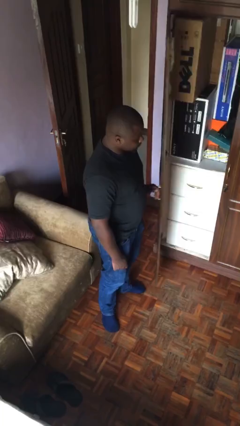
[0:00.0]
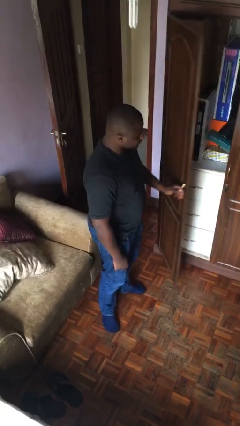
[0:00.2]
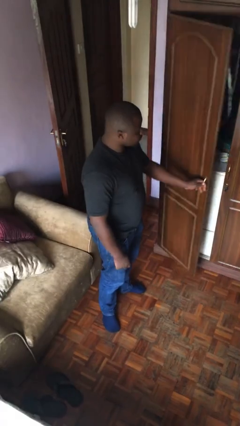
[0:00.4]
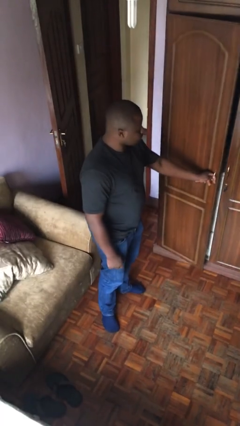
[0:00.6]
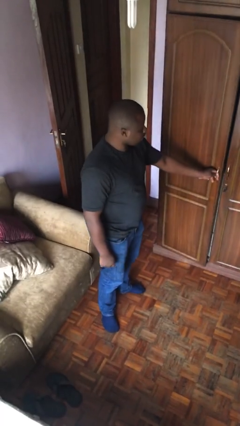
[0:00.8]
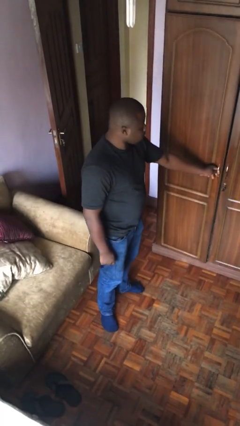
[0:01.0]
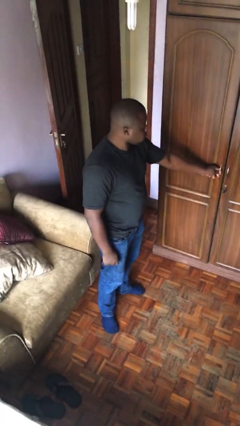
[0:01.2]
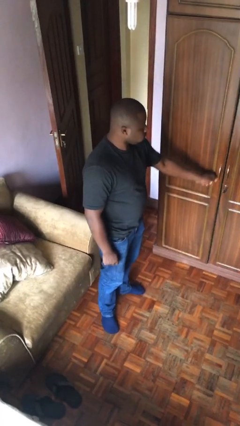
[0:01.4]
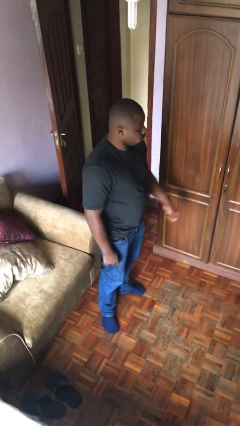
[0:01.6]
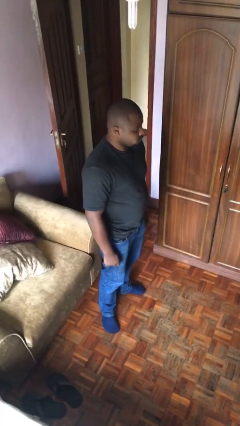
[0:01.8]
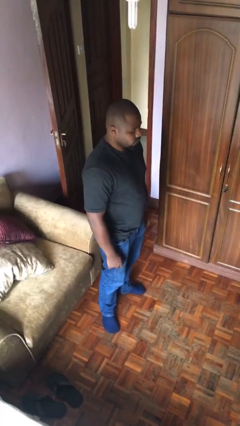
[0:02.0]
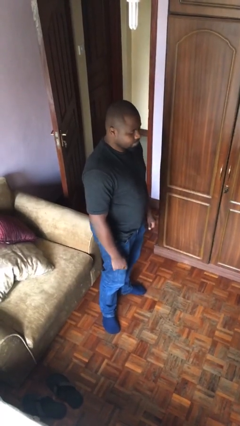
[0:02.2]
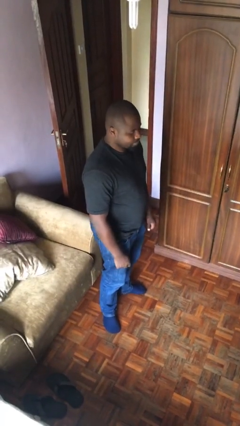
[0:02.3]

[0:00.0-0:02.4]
person closes dresser drawer

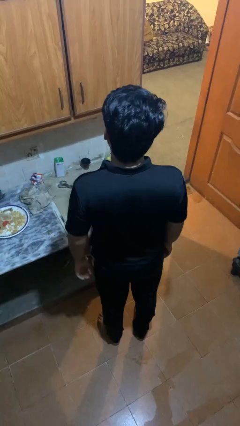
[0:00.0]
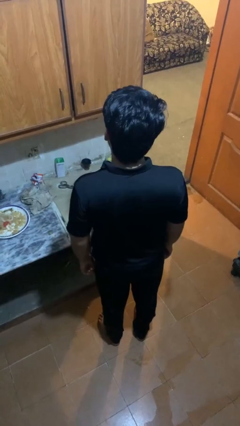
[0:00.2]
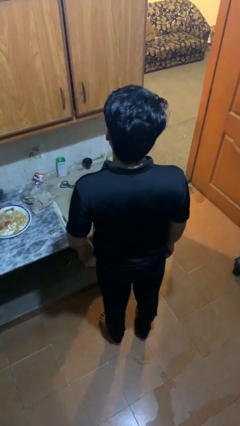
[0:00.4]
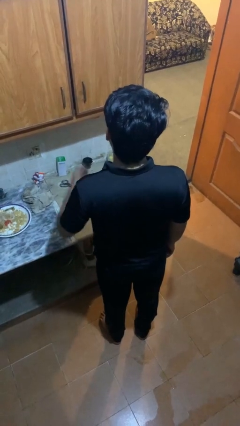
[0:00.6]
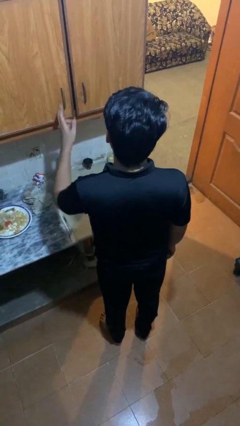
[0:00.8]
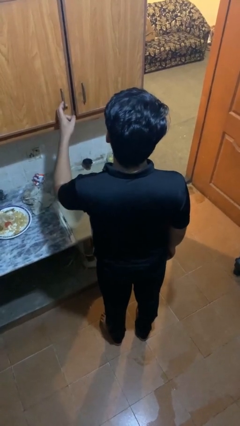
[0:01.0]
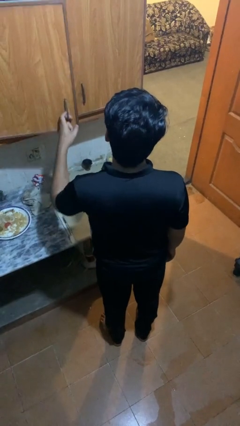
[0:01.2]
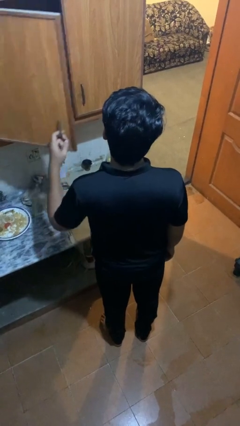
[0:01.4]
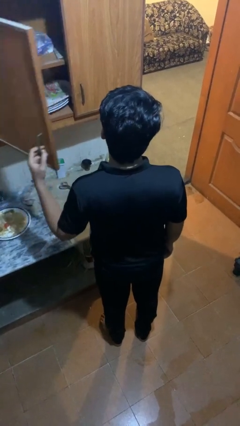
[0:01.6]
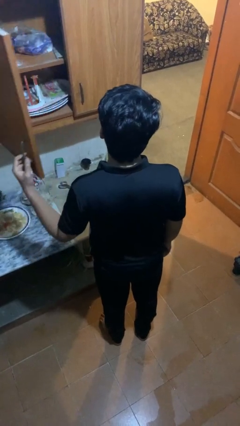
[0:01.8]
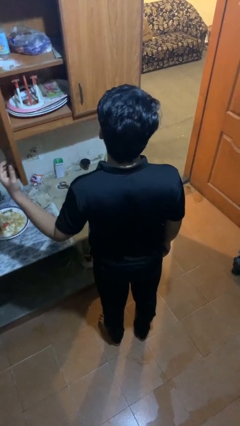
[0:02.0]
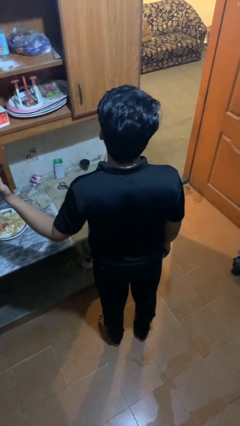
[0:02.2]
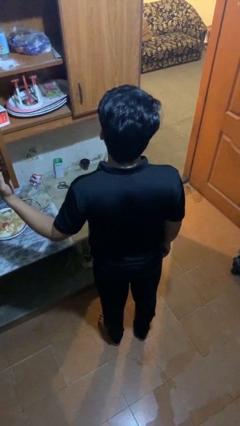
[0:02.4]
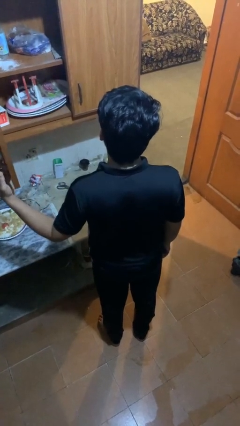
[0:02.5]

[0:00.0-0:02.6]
person opens cabinet

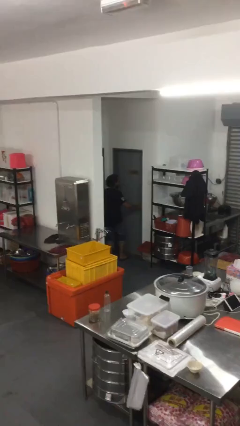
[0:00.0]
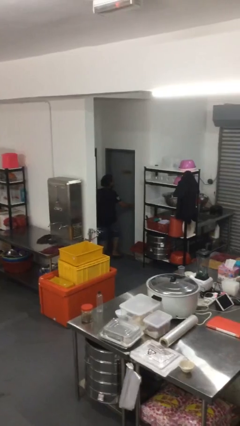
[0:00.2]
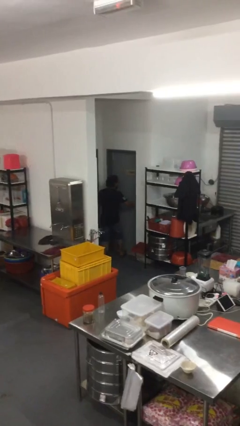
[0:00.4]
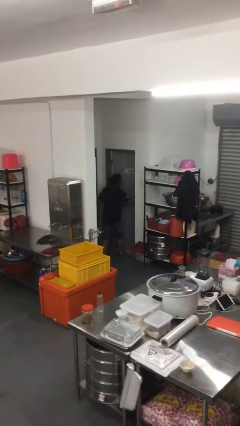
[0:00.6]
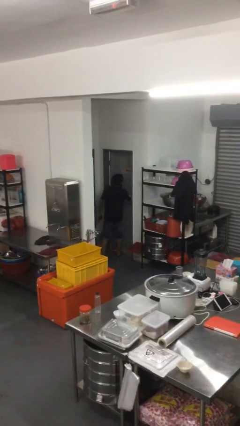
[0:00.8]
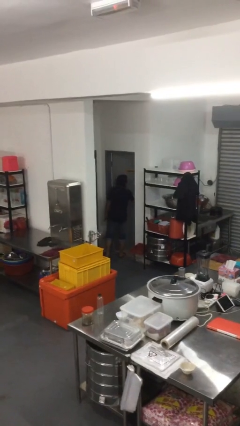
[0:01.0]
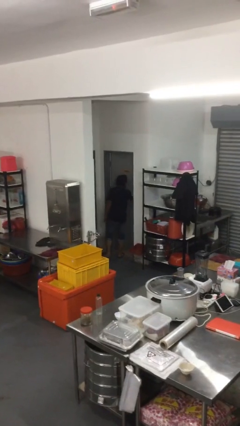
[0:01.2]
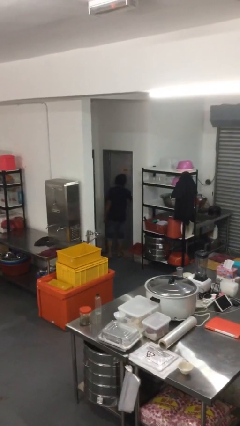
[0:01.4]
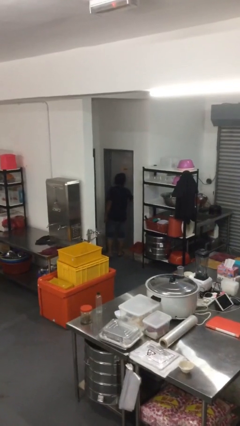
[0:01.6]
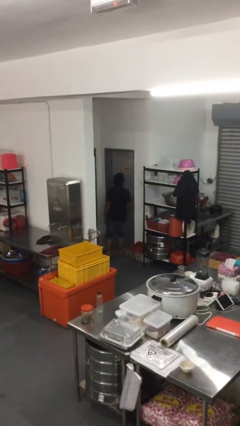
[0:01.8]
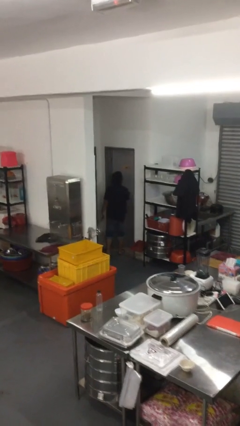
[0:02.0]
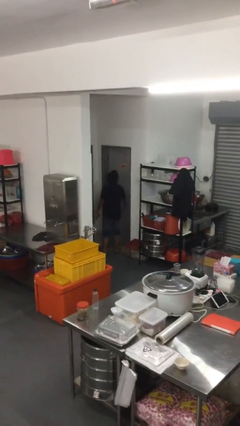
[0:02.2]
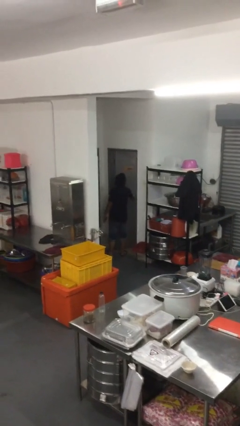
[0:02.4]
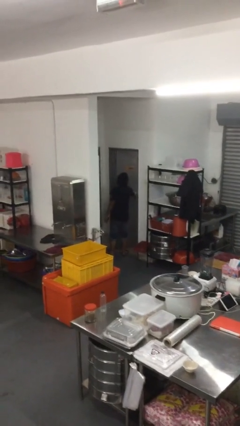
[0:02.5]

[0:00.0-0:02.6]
person opens facility door

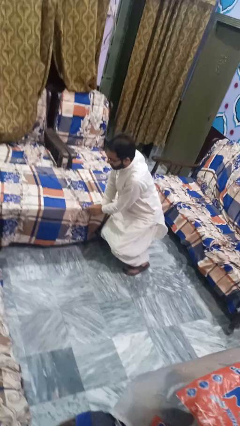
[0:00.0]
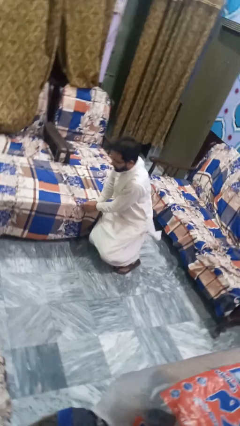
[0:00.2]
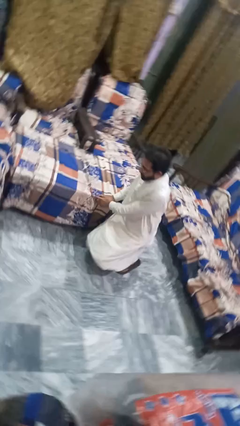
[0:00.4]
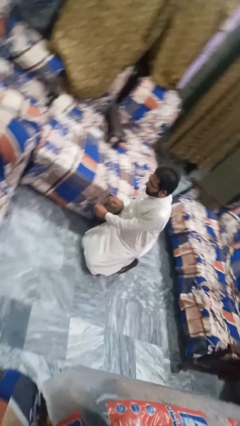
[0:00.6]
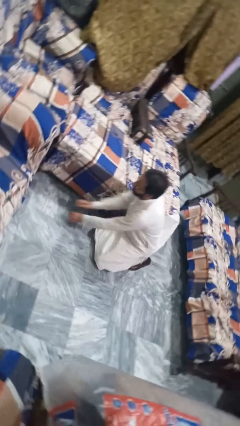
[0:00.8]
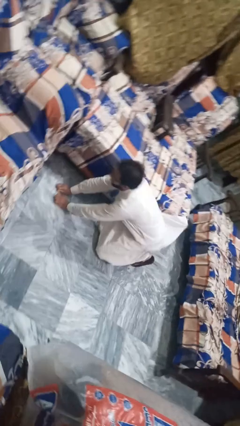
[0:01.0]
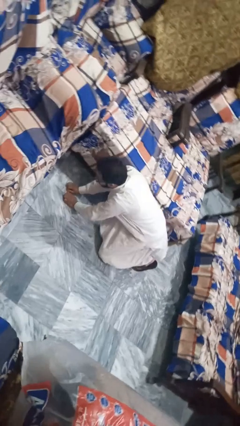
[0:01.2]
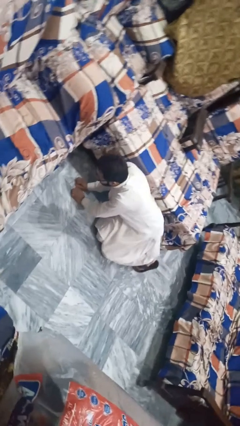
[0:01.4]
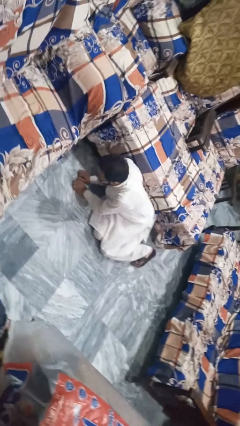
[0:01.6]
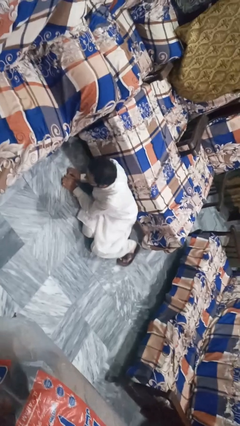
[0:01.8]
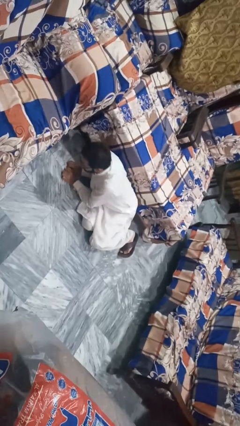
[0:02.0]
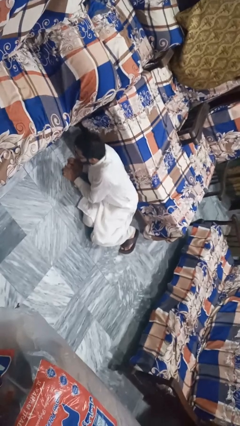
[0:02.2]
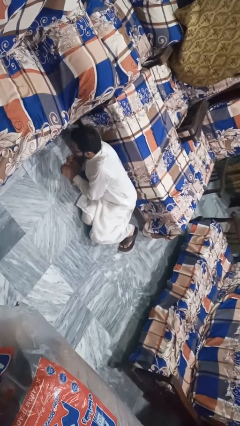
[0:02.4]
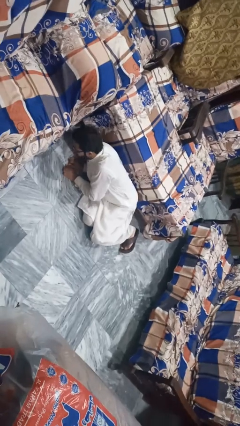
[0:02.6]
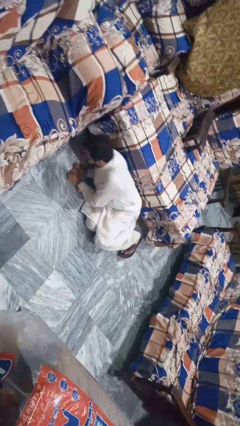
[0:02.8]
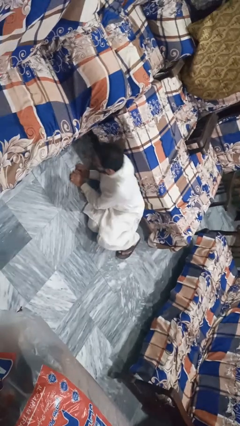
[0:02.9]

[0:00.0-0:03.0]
person lies down on floor

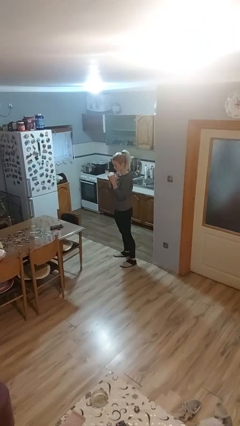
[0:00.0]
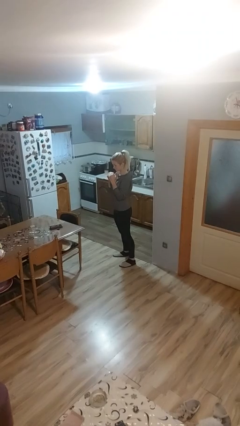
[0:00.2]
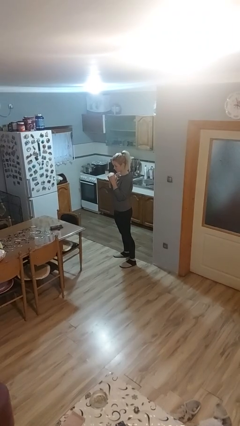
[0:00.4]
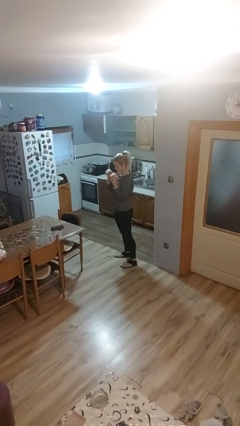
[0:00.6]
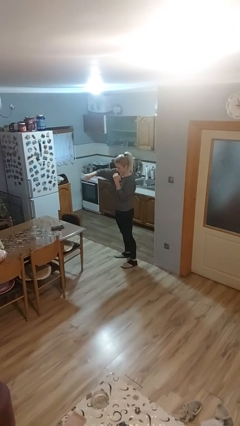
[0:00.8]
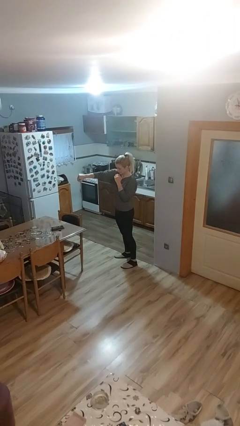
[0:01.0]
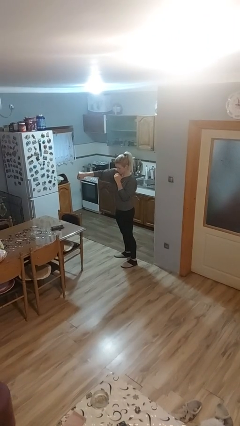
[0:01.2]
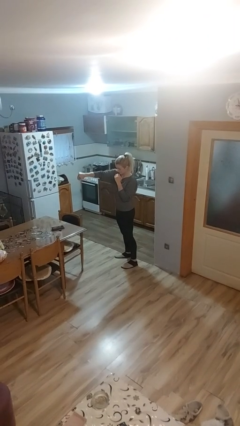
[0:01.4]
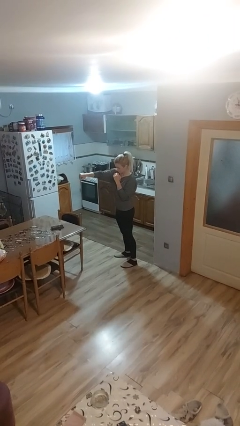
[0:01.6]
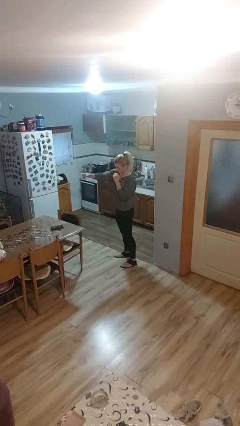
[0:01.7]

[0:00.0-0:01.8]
person punches

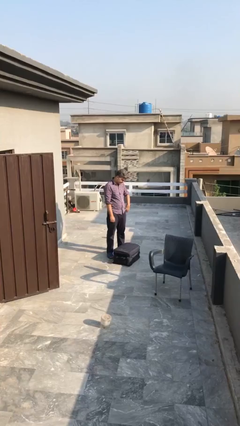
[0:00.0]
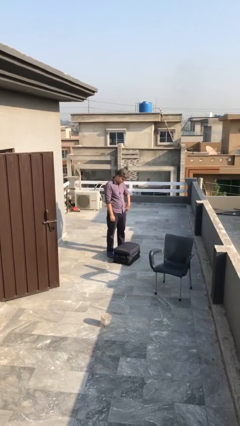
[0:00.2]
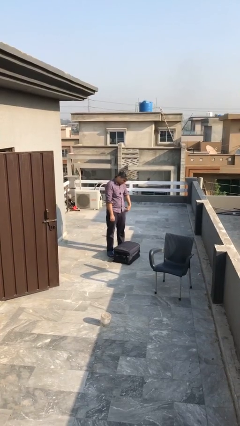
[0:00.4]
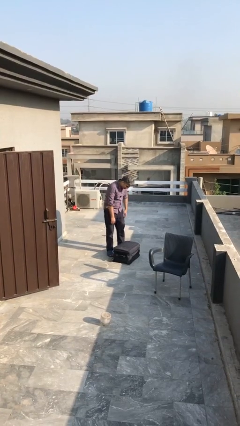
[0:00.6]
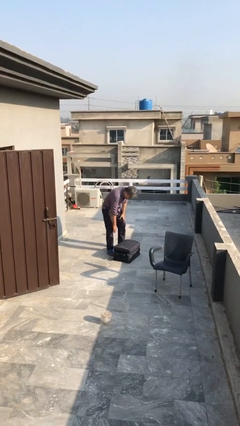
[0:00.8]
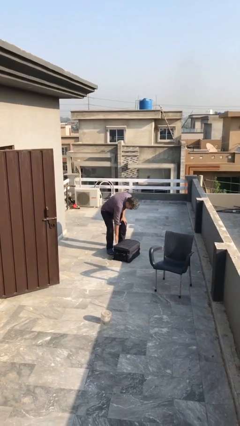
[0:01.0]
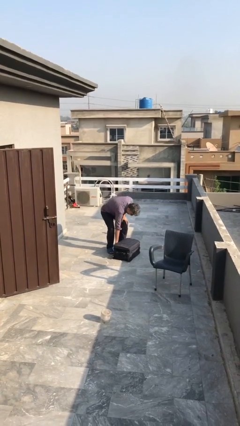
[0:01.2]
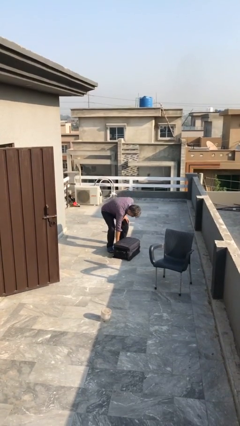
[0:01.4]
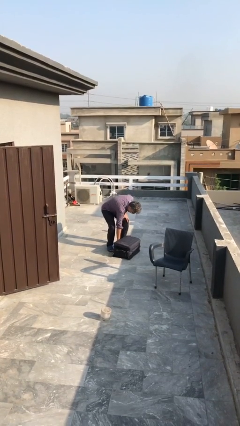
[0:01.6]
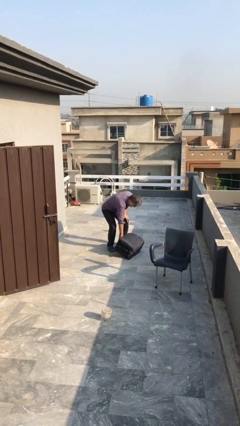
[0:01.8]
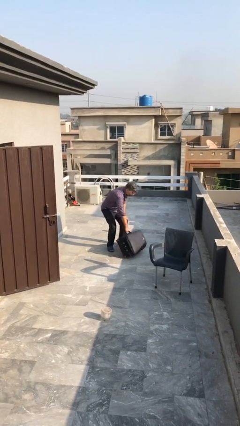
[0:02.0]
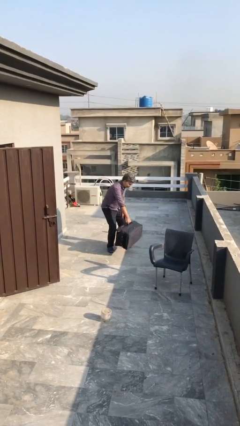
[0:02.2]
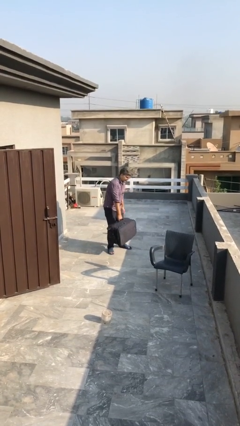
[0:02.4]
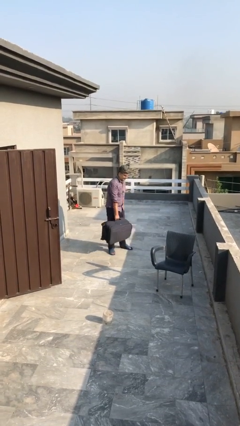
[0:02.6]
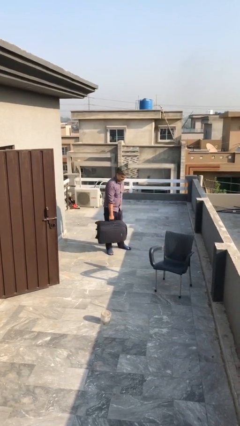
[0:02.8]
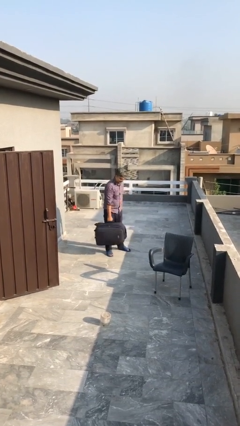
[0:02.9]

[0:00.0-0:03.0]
person picks up object from floor

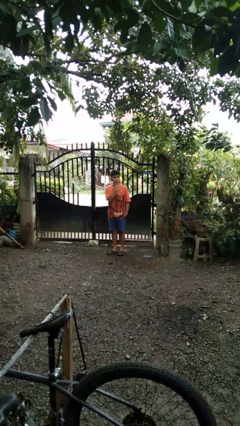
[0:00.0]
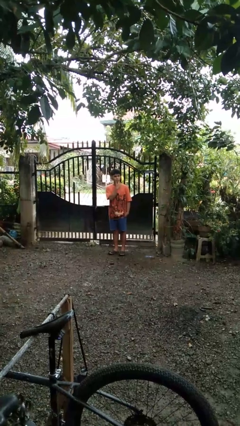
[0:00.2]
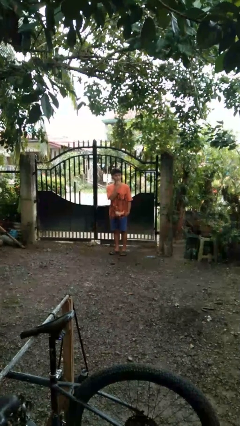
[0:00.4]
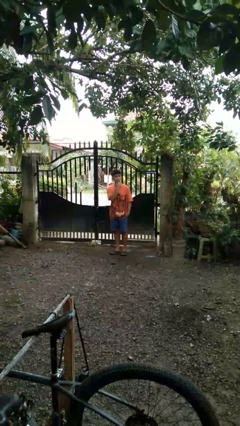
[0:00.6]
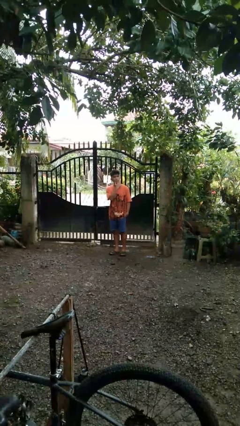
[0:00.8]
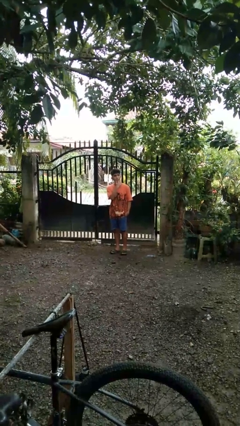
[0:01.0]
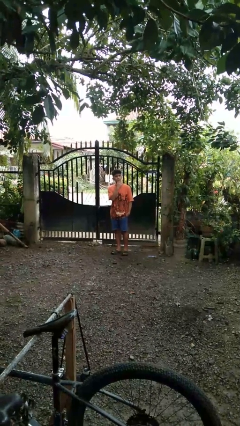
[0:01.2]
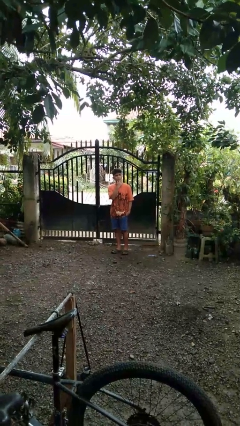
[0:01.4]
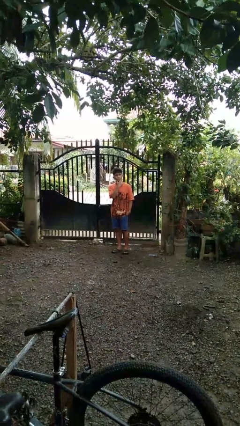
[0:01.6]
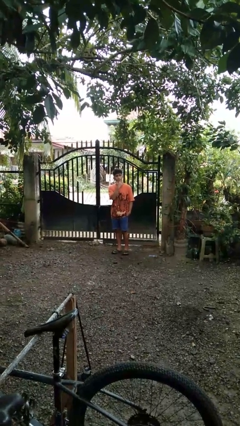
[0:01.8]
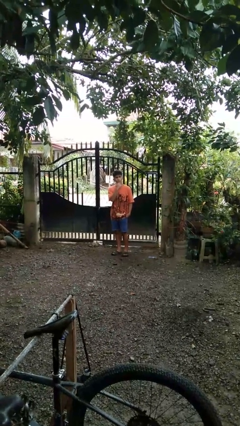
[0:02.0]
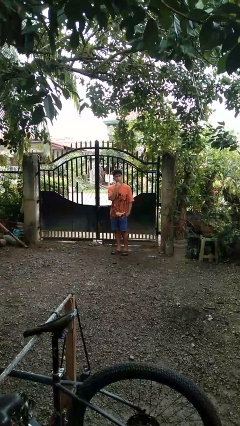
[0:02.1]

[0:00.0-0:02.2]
person strokes chin
